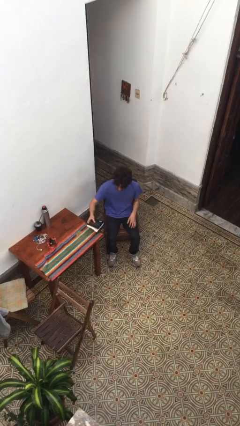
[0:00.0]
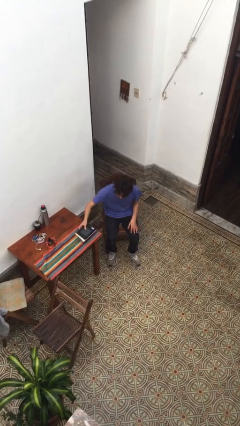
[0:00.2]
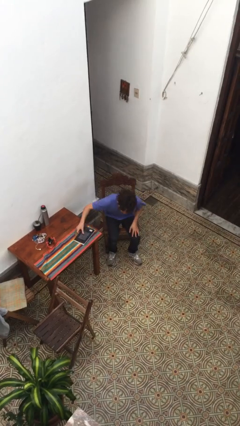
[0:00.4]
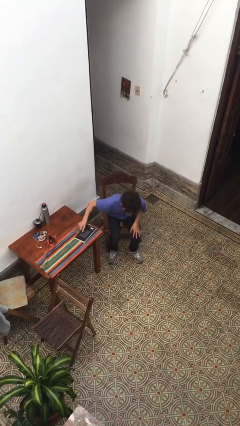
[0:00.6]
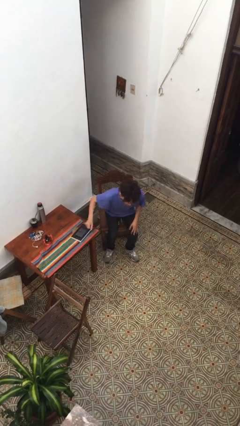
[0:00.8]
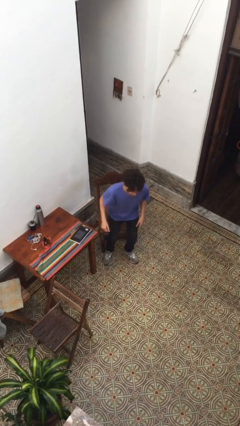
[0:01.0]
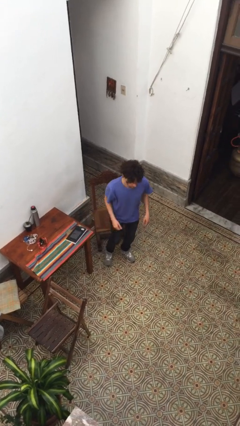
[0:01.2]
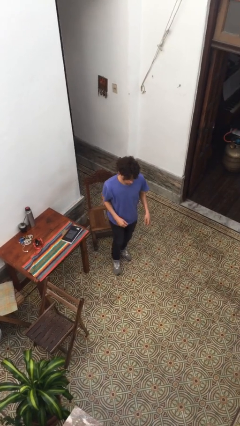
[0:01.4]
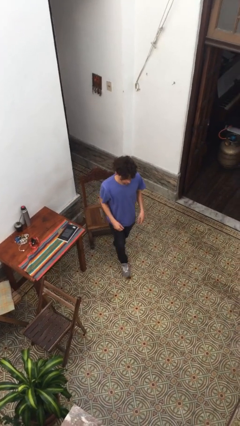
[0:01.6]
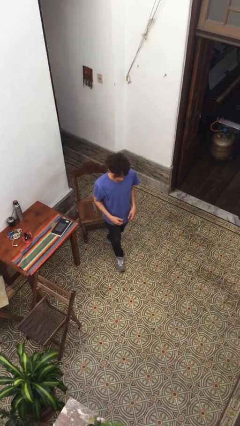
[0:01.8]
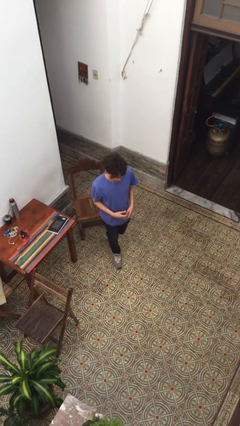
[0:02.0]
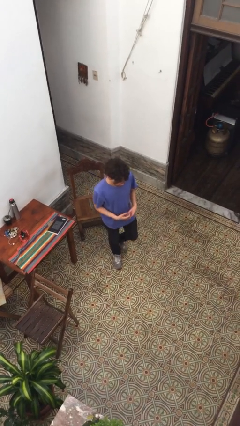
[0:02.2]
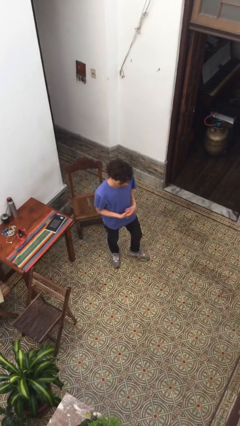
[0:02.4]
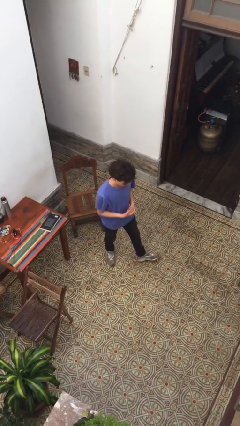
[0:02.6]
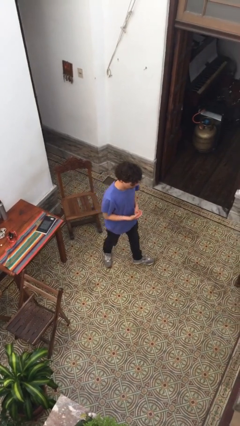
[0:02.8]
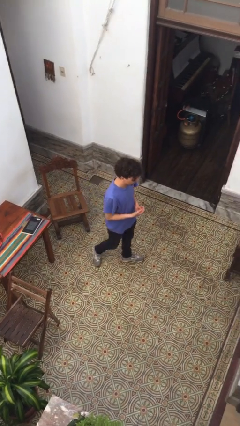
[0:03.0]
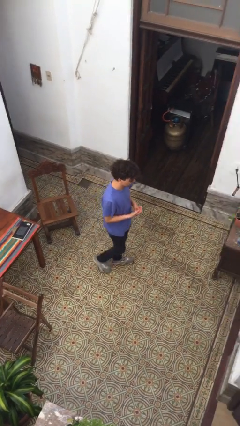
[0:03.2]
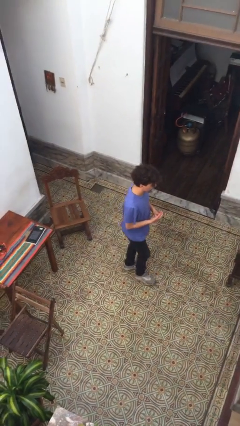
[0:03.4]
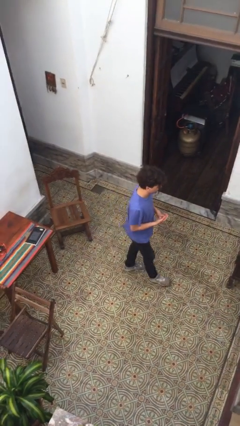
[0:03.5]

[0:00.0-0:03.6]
person stands up

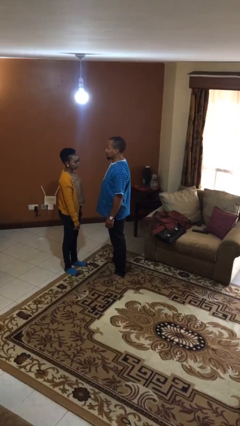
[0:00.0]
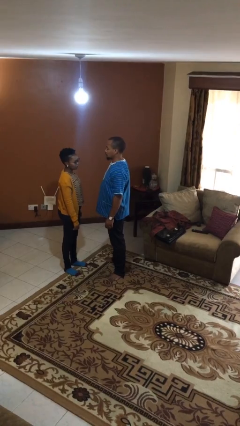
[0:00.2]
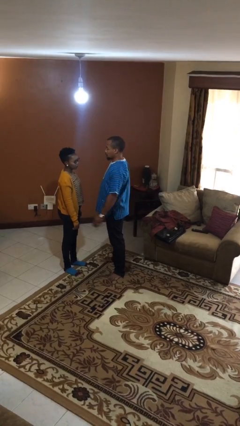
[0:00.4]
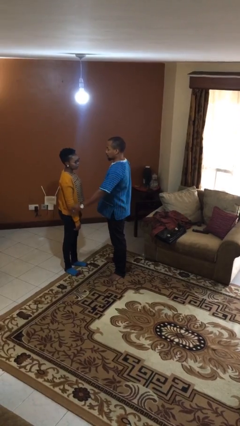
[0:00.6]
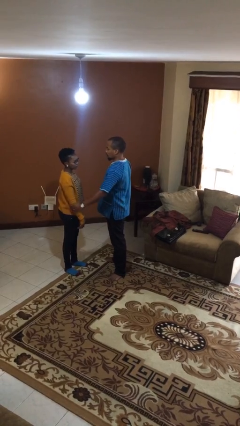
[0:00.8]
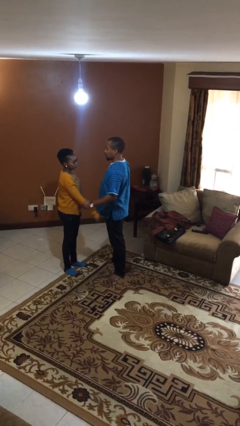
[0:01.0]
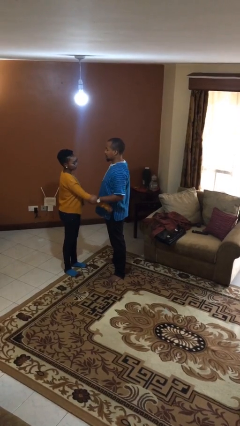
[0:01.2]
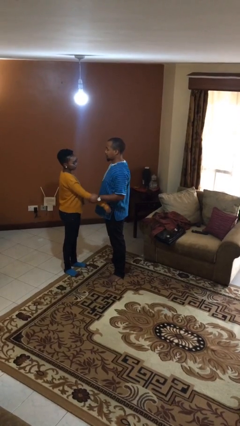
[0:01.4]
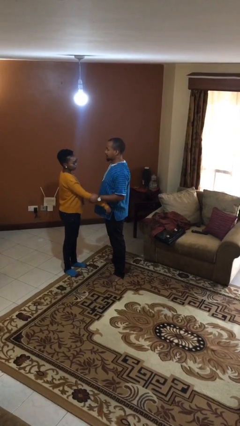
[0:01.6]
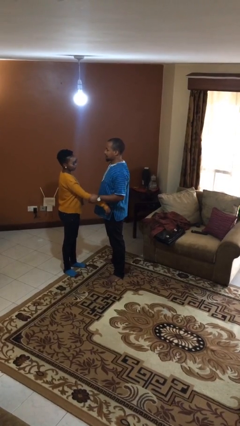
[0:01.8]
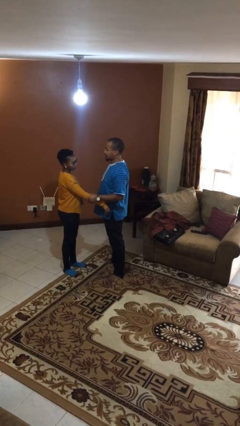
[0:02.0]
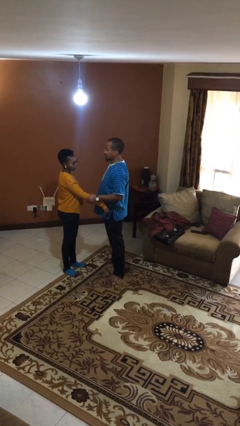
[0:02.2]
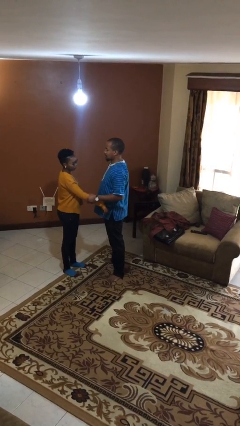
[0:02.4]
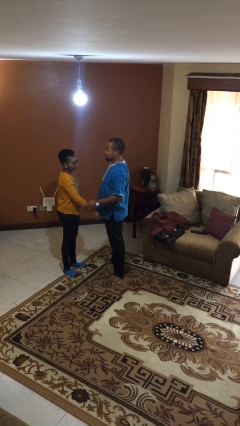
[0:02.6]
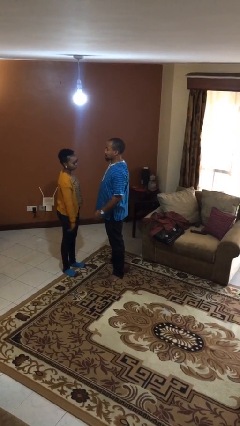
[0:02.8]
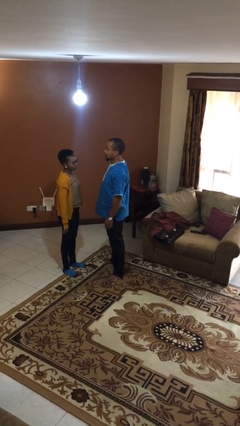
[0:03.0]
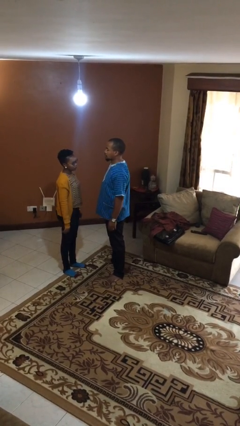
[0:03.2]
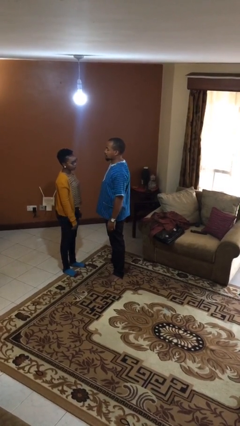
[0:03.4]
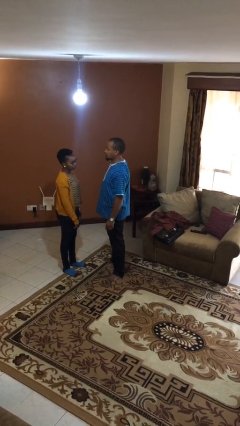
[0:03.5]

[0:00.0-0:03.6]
person grabs person by forearm

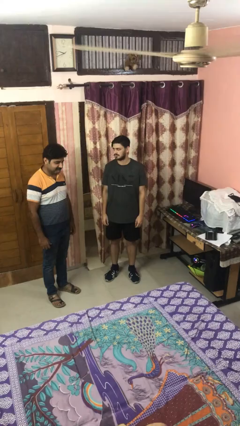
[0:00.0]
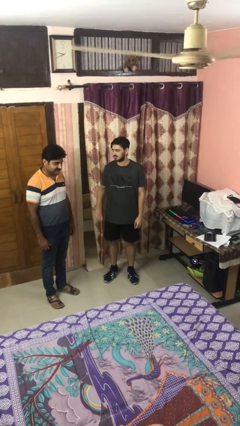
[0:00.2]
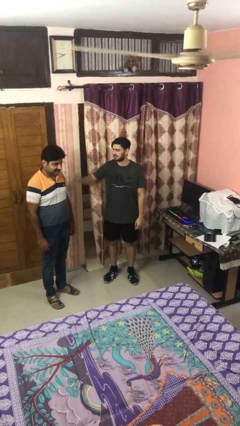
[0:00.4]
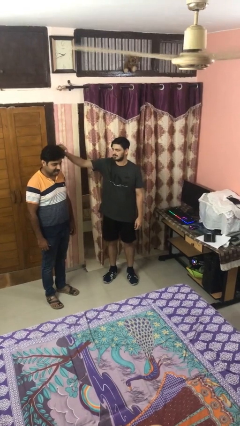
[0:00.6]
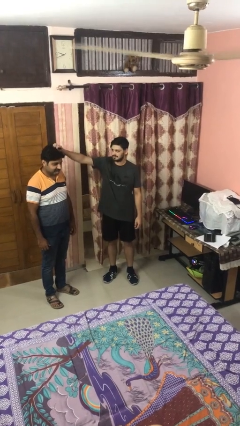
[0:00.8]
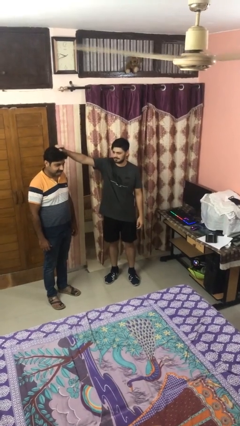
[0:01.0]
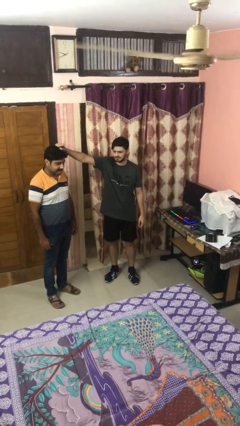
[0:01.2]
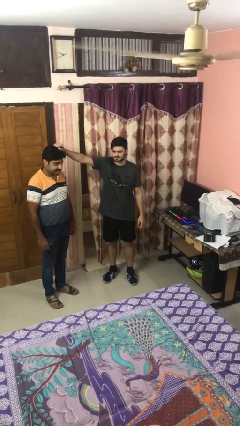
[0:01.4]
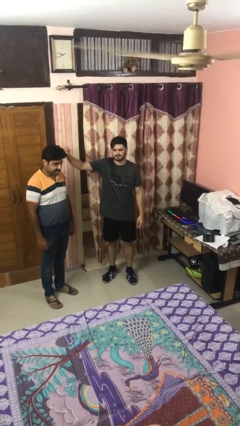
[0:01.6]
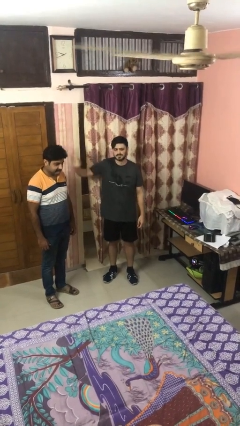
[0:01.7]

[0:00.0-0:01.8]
person grabs person by hair

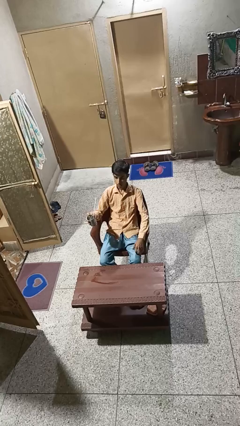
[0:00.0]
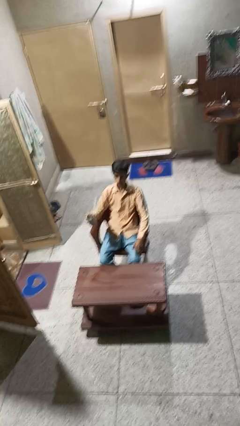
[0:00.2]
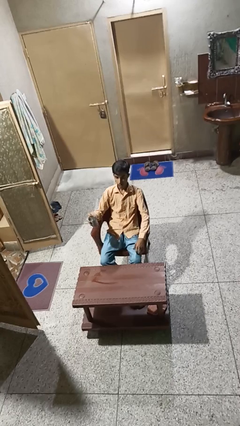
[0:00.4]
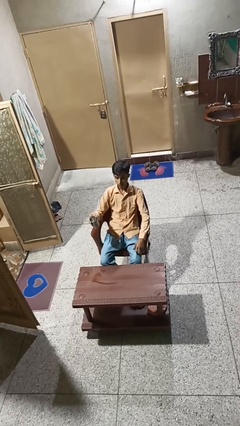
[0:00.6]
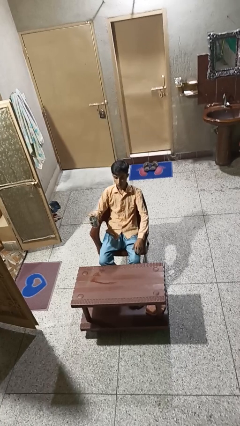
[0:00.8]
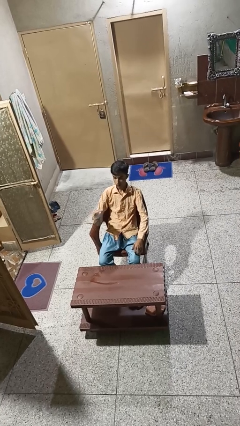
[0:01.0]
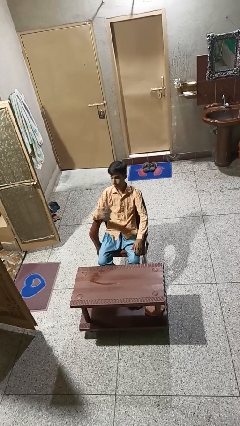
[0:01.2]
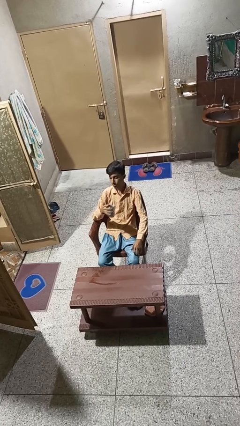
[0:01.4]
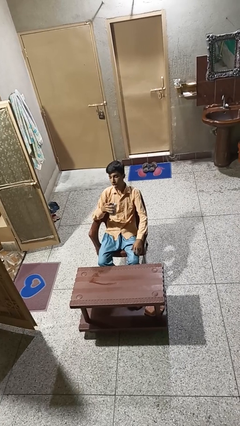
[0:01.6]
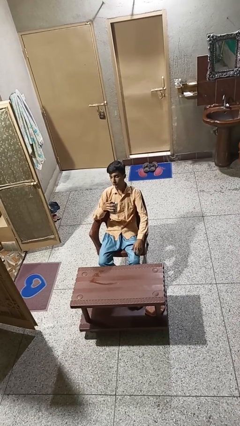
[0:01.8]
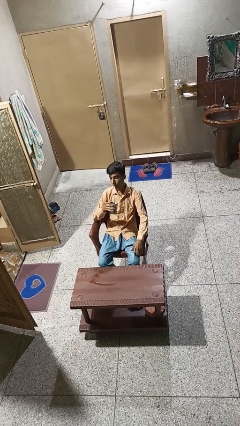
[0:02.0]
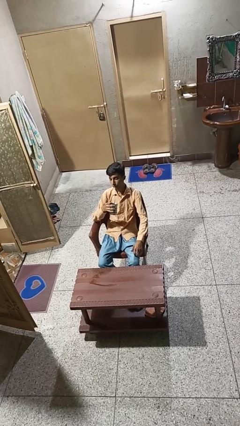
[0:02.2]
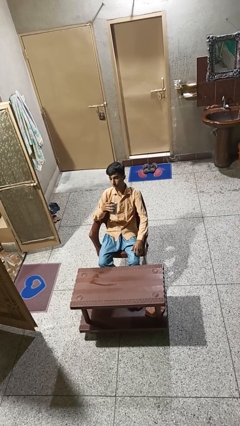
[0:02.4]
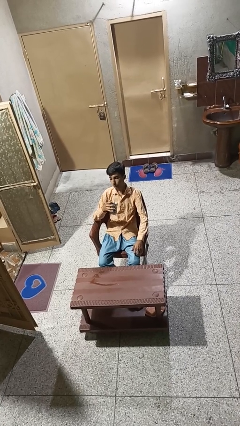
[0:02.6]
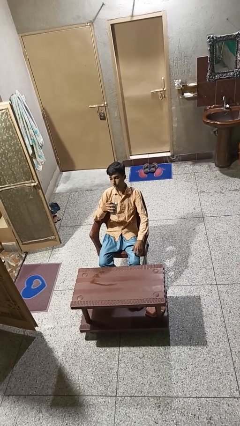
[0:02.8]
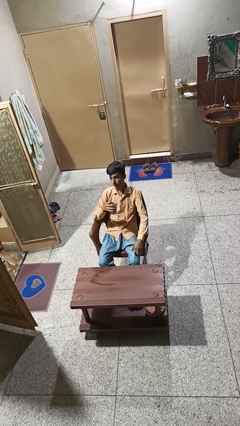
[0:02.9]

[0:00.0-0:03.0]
person drinks from straw

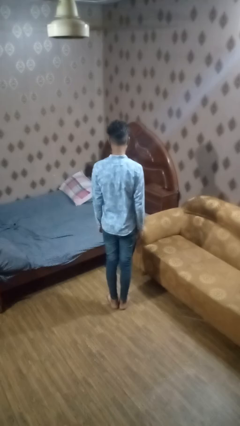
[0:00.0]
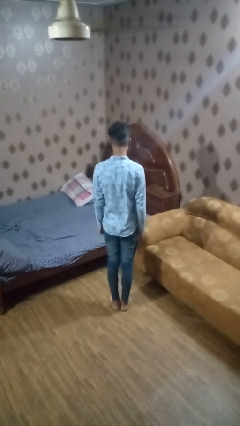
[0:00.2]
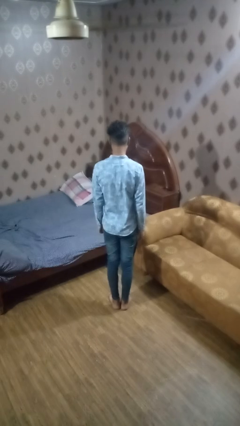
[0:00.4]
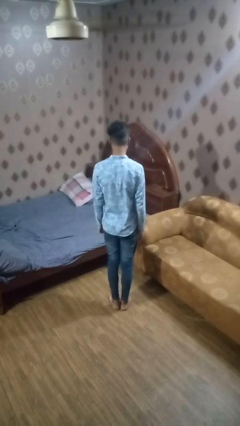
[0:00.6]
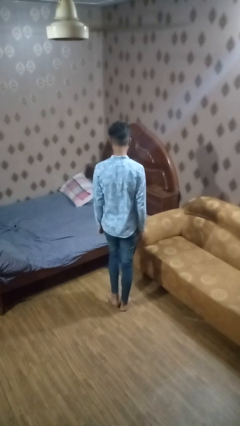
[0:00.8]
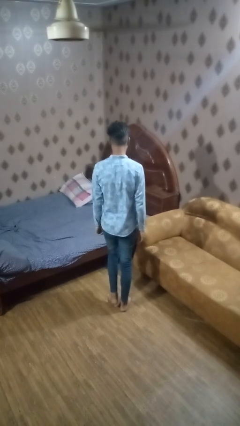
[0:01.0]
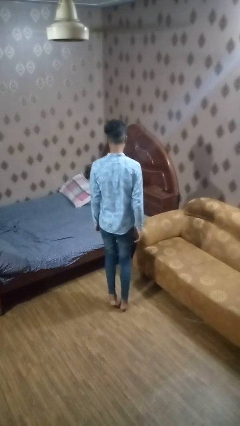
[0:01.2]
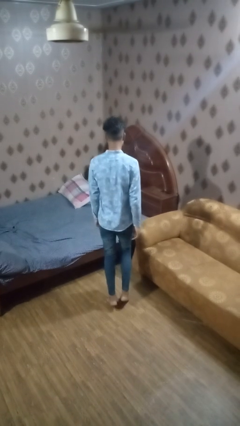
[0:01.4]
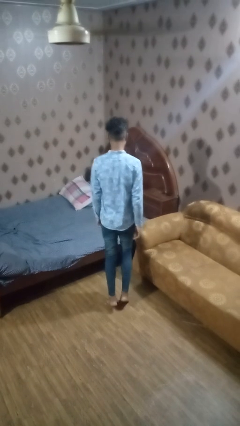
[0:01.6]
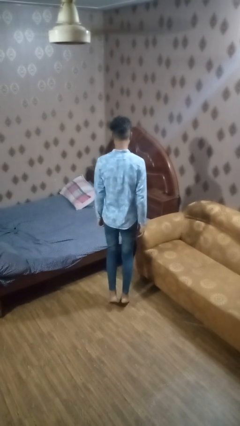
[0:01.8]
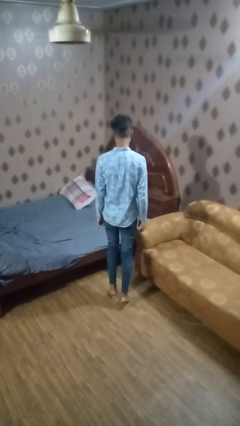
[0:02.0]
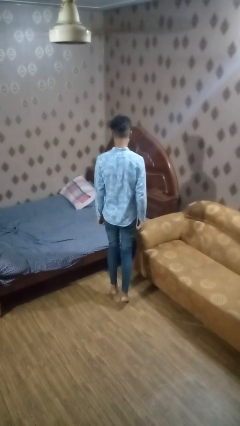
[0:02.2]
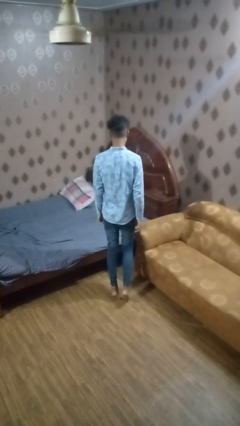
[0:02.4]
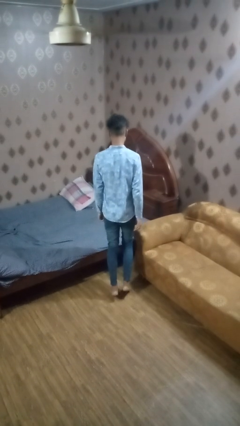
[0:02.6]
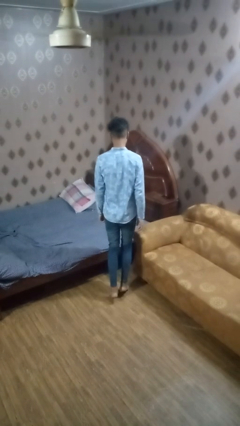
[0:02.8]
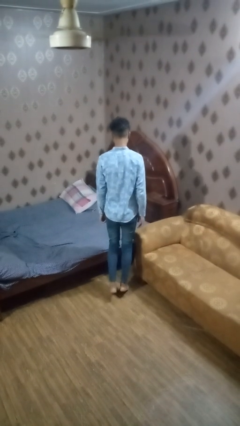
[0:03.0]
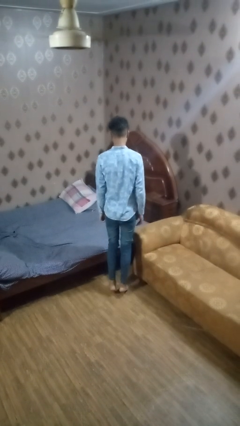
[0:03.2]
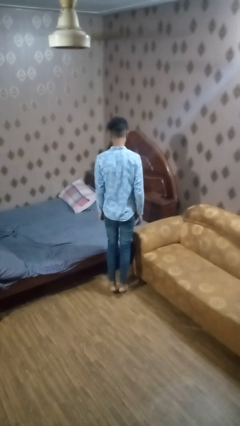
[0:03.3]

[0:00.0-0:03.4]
person walks tiptoe

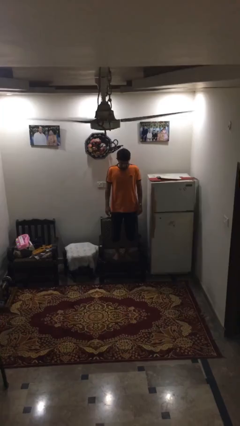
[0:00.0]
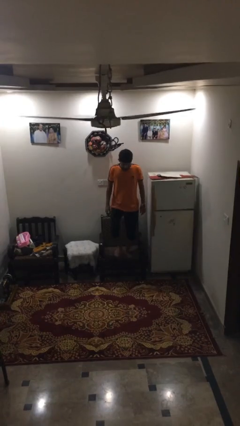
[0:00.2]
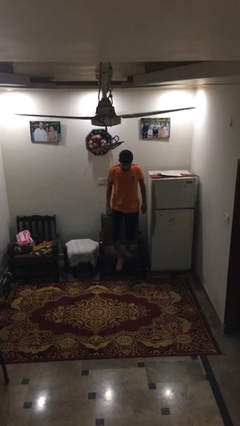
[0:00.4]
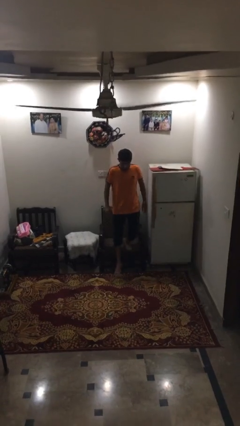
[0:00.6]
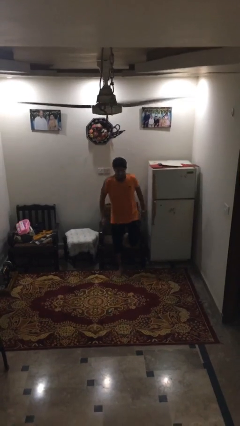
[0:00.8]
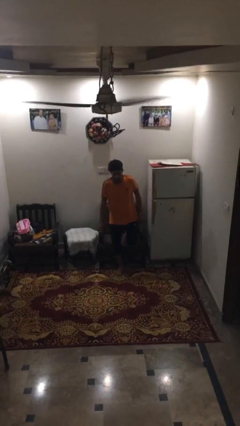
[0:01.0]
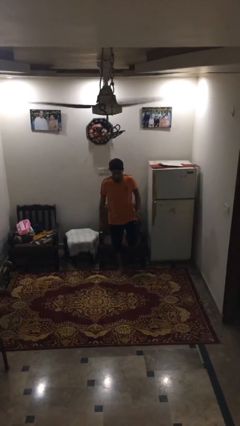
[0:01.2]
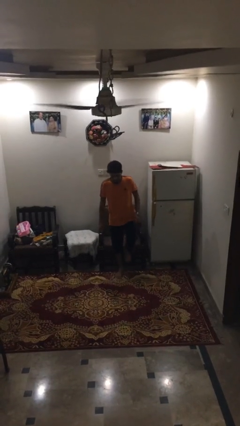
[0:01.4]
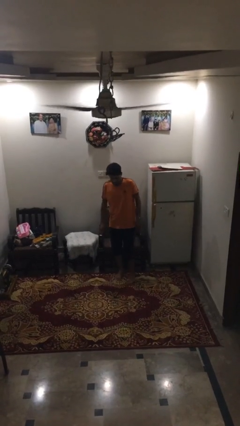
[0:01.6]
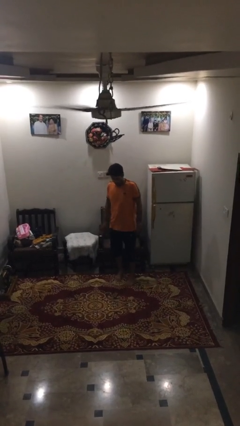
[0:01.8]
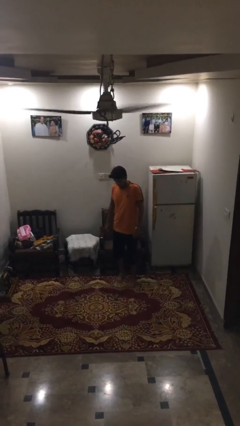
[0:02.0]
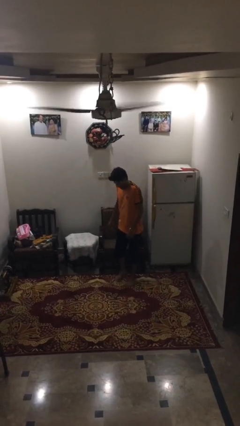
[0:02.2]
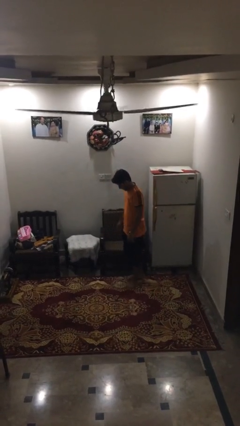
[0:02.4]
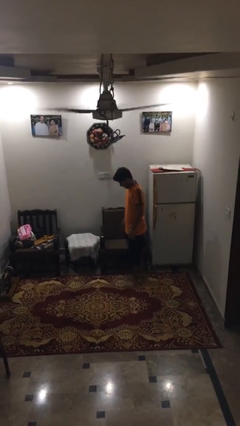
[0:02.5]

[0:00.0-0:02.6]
person climbs off couch
